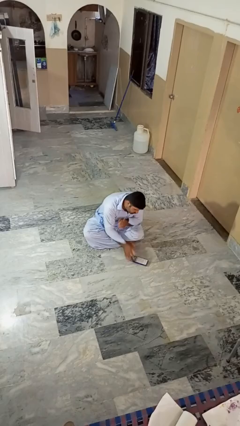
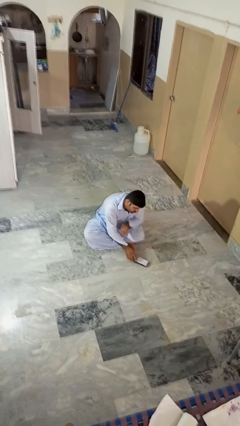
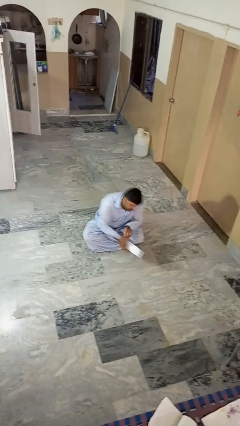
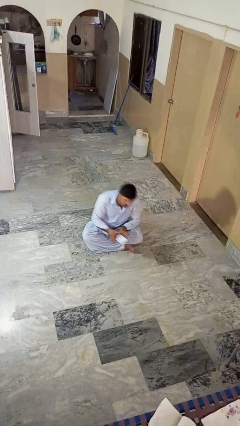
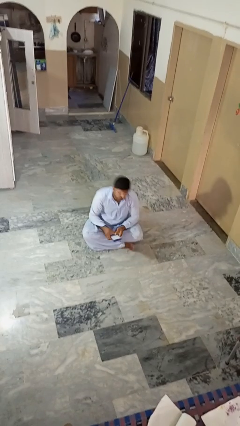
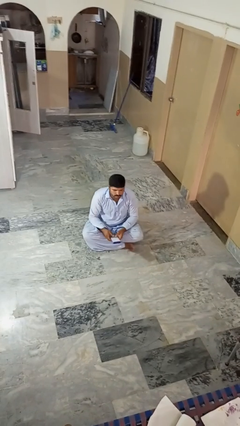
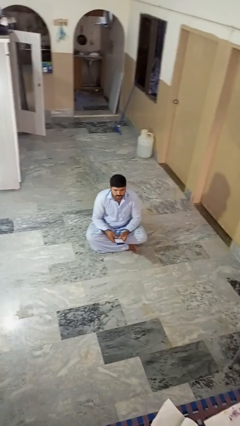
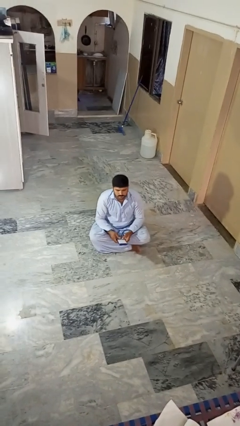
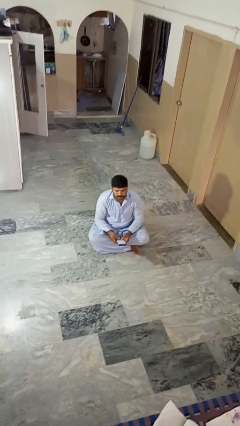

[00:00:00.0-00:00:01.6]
person picks up object from floor

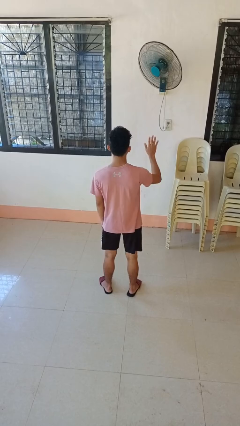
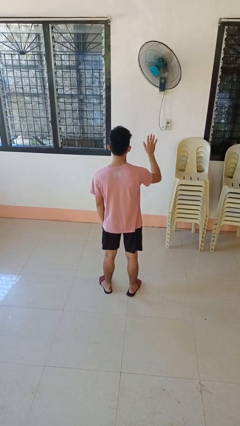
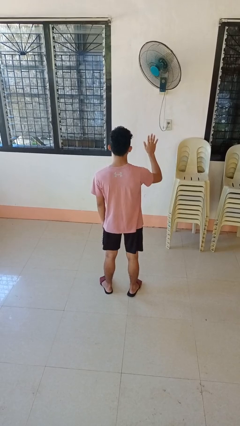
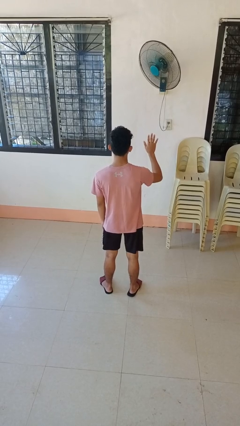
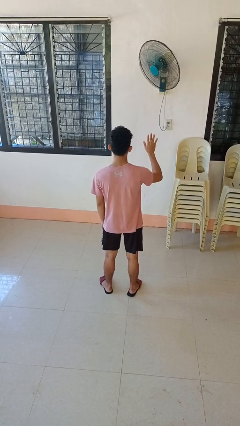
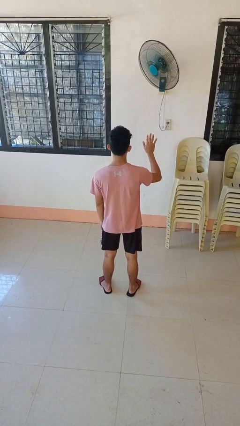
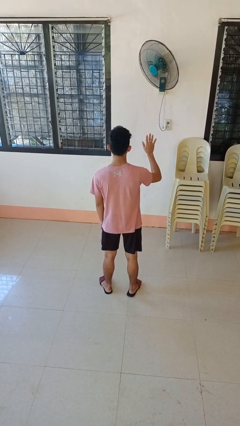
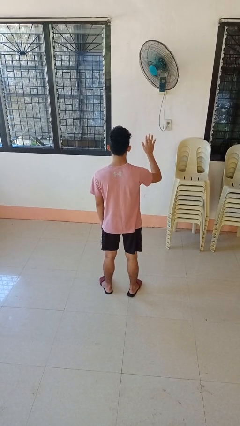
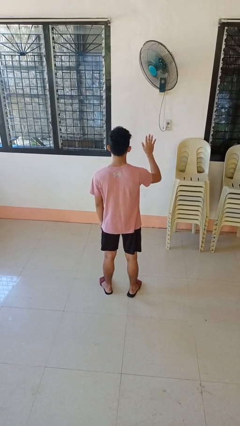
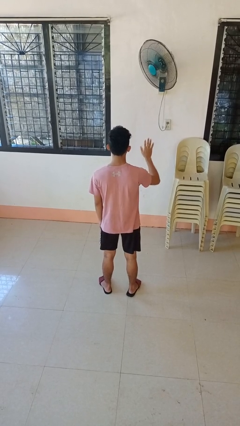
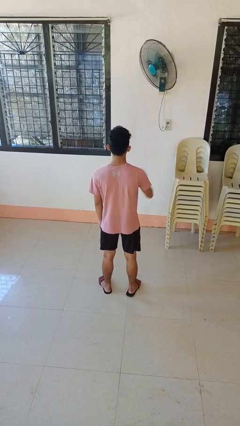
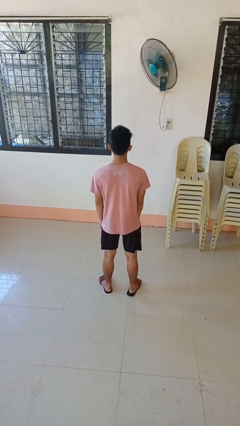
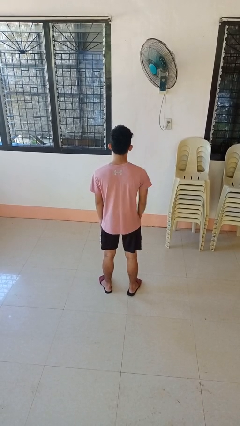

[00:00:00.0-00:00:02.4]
person gestures number five

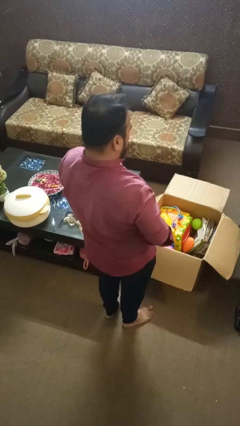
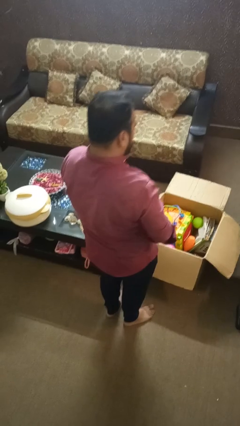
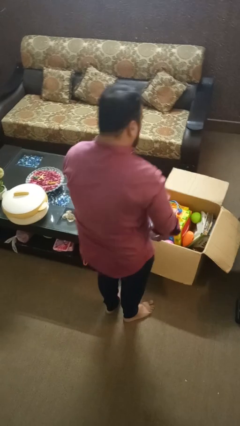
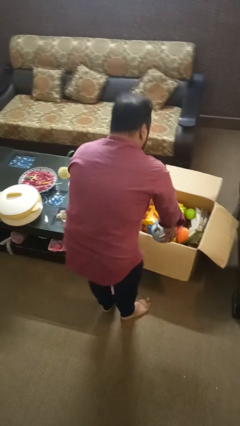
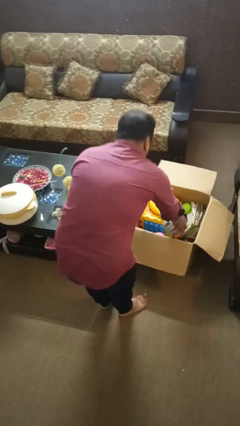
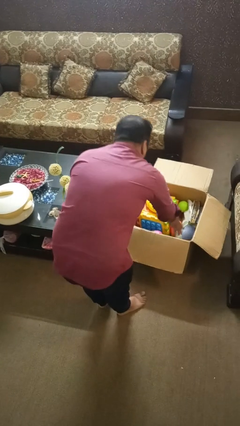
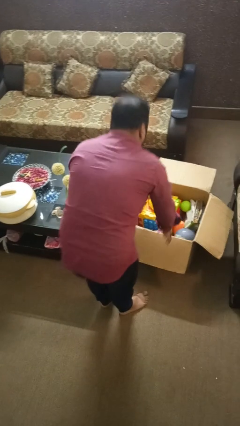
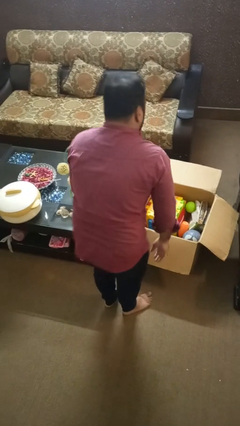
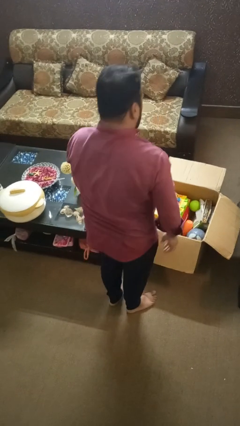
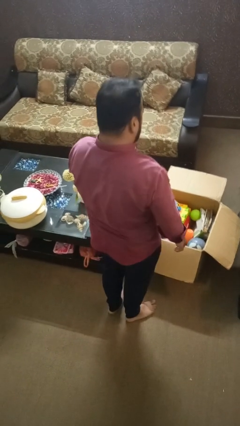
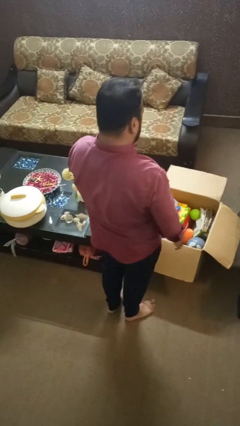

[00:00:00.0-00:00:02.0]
person puts object into box

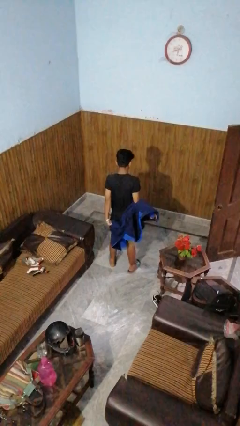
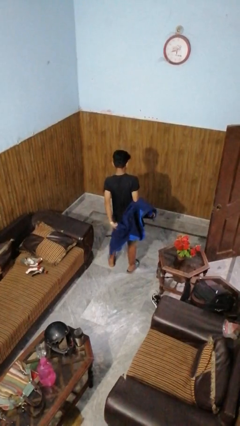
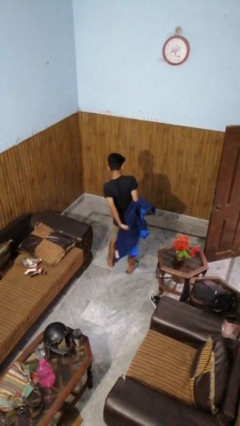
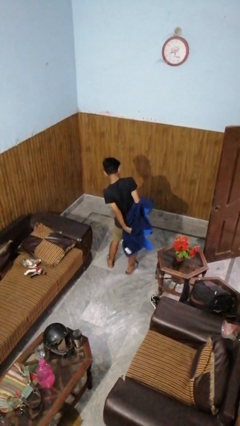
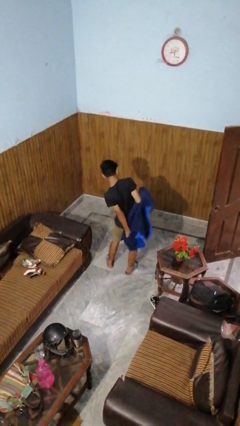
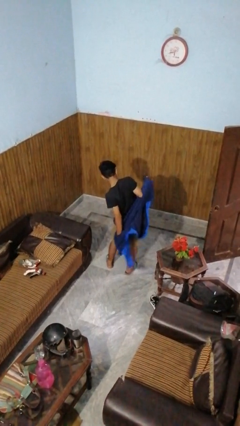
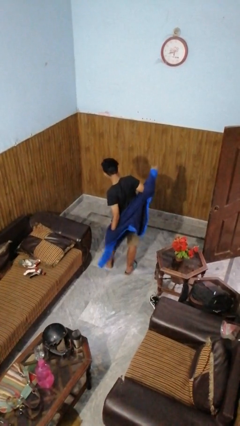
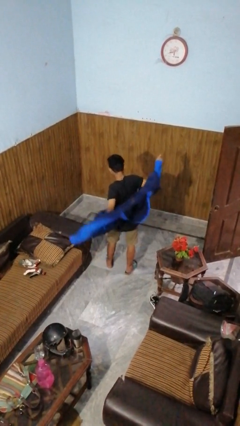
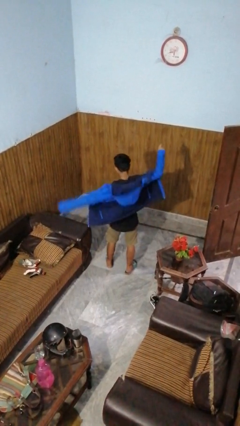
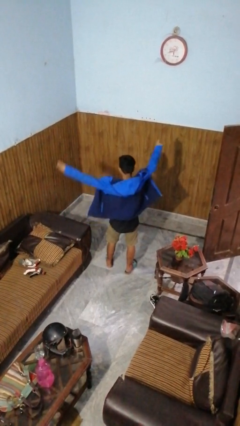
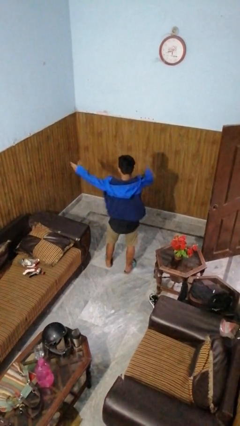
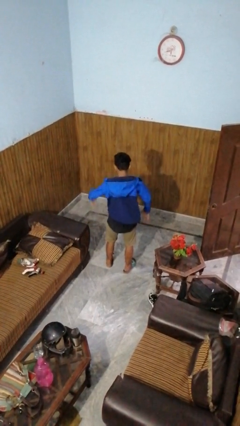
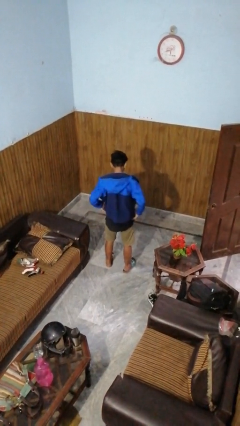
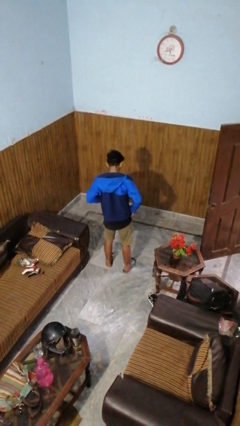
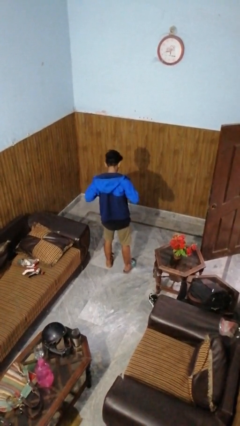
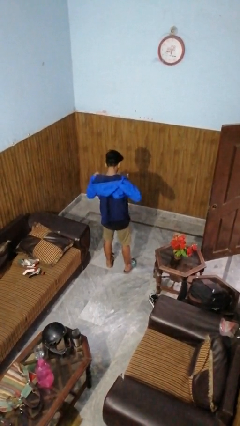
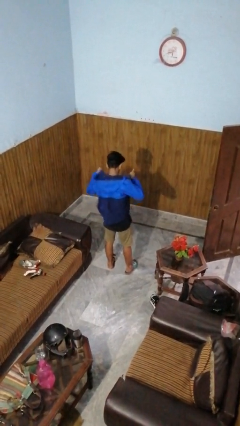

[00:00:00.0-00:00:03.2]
person puts on jacket

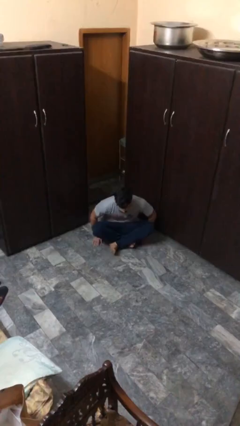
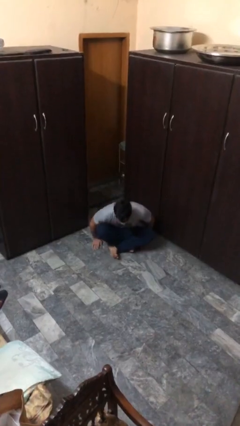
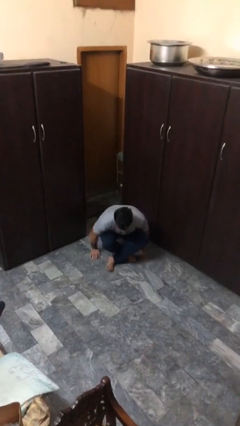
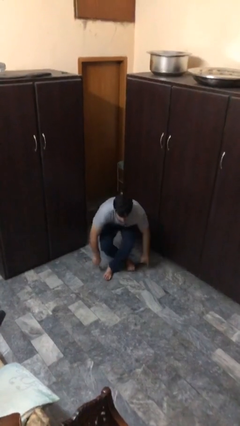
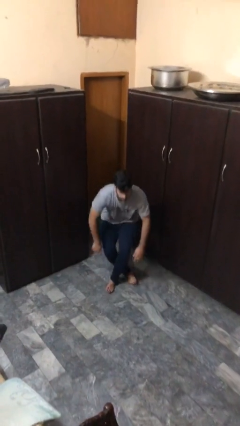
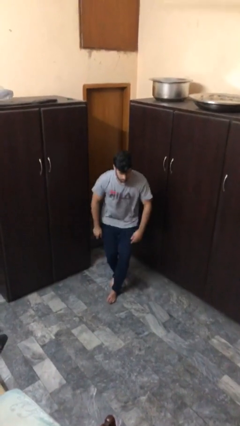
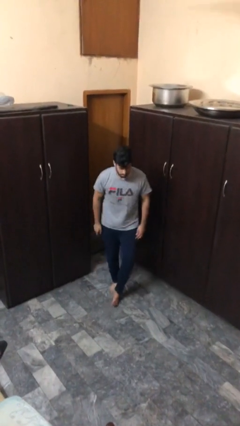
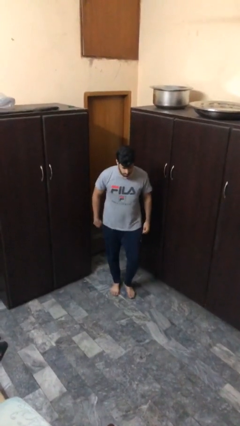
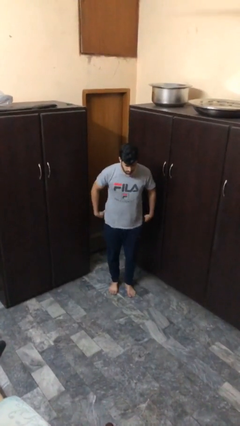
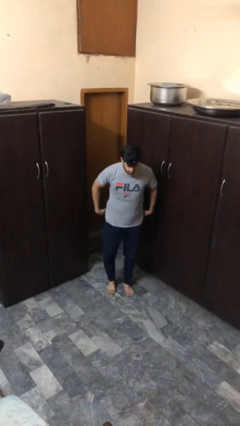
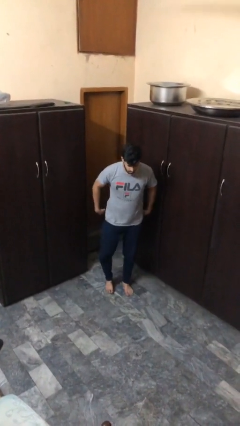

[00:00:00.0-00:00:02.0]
person stands up from floor

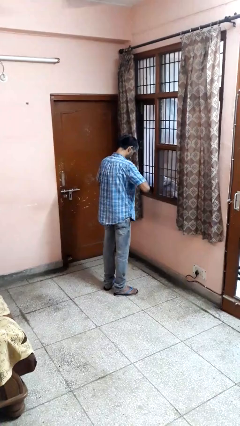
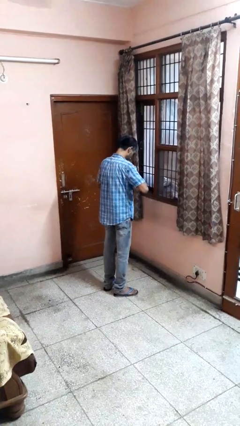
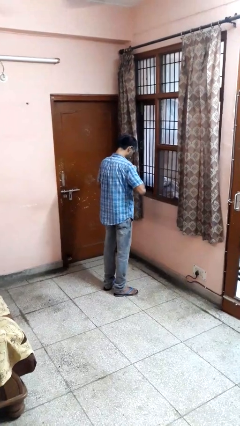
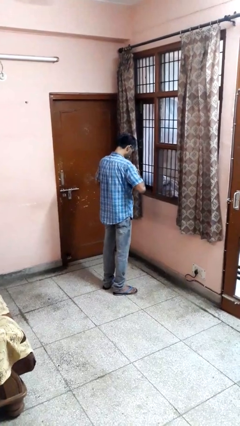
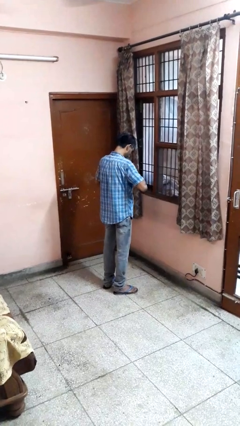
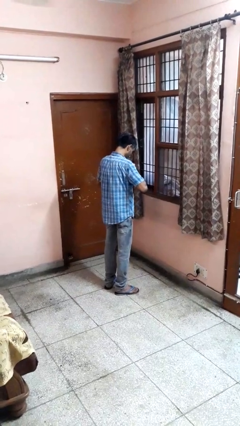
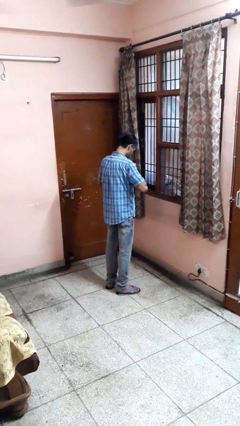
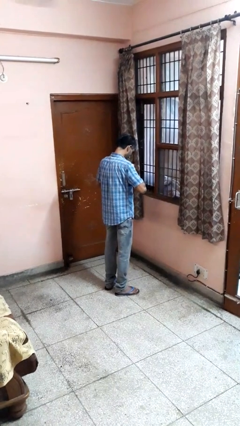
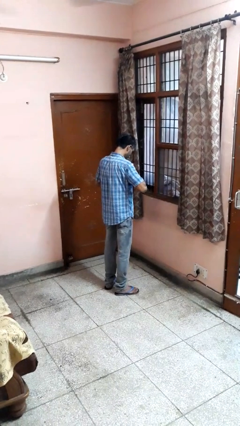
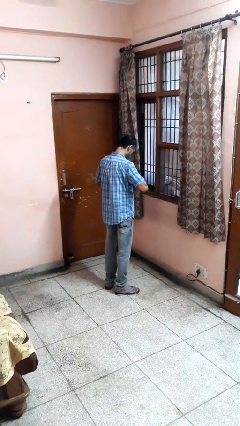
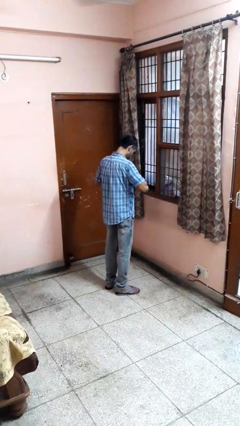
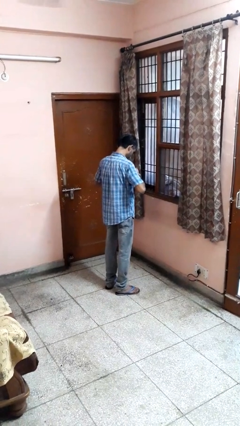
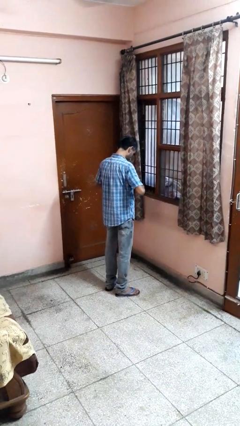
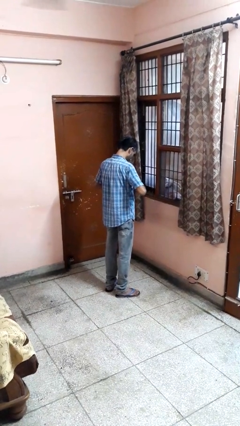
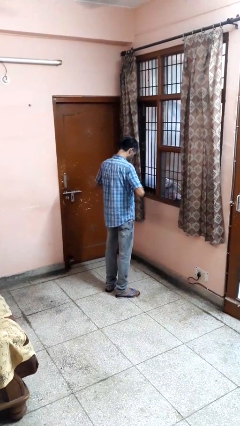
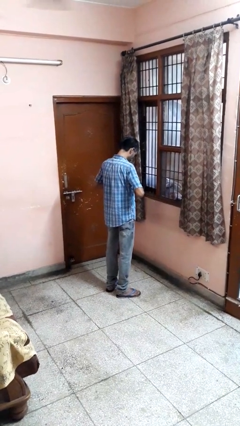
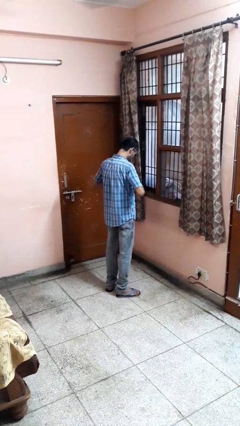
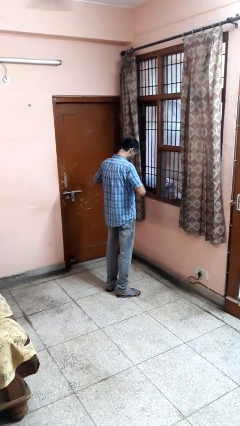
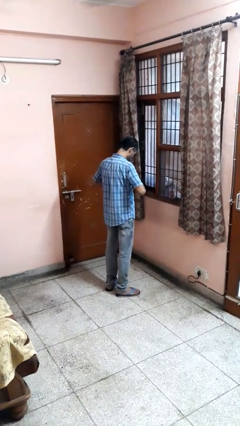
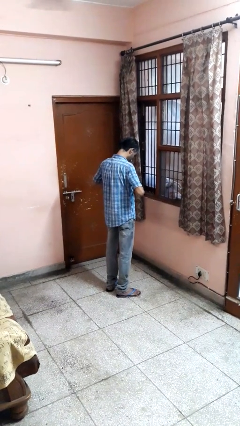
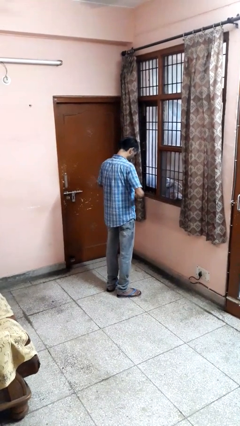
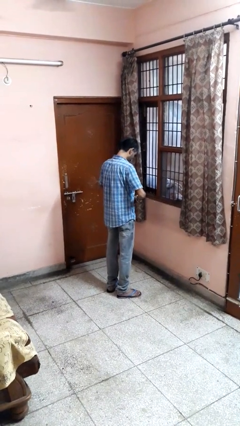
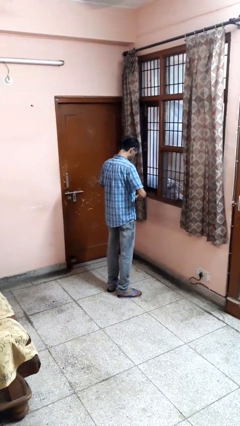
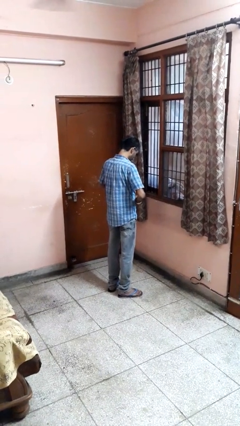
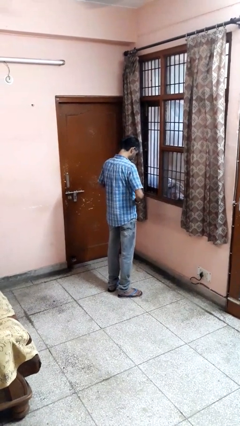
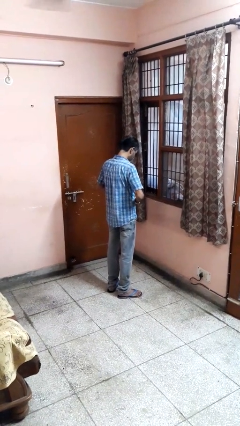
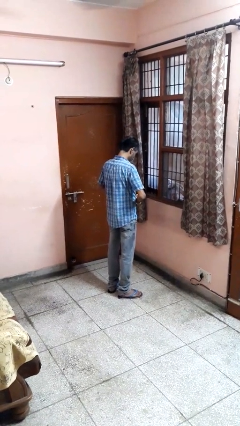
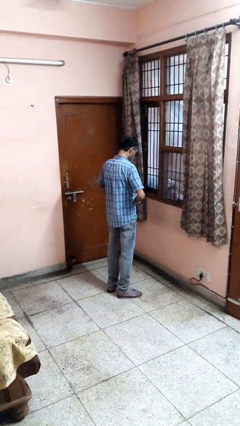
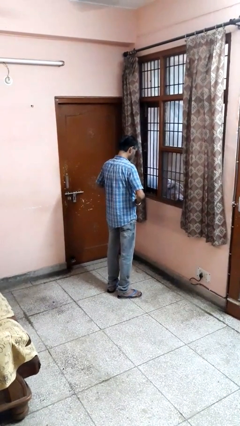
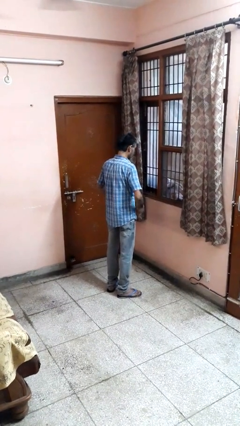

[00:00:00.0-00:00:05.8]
person buttons shirt

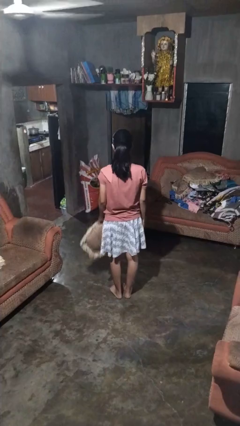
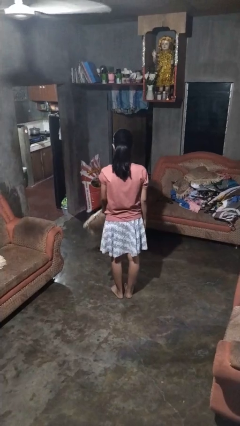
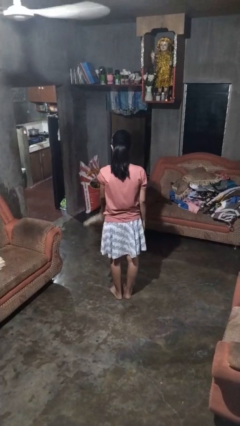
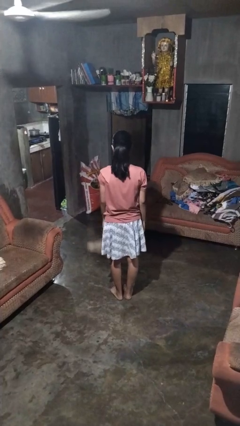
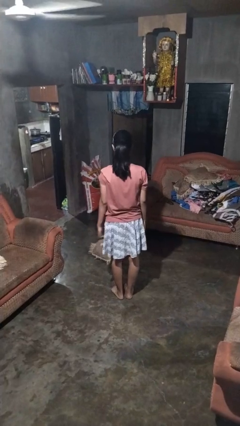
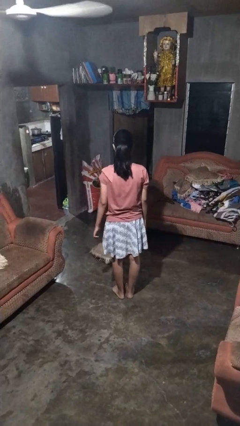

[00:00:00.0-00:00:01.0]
person throws object to ground
